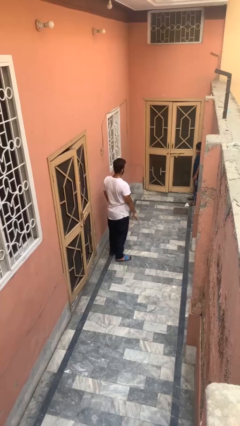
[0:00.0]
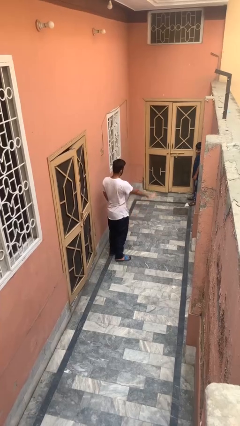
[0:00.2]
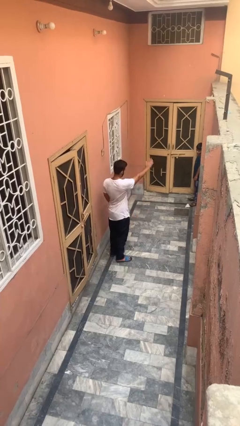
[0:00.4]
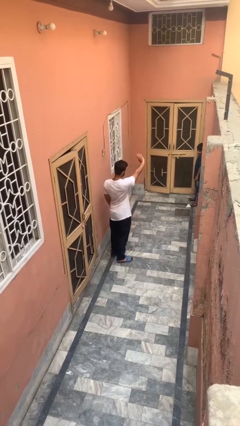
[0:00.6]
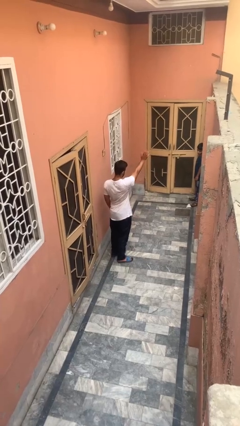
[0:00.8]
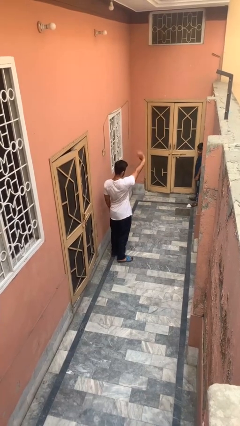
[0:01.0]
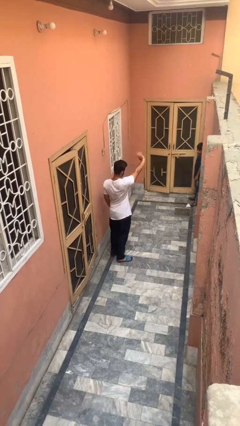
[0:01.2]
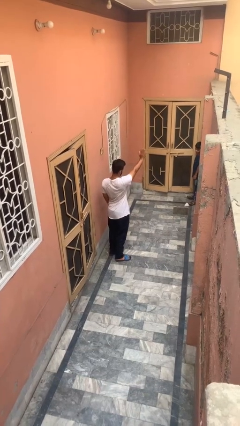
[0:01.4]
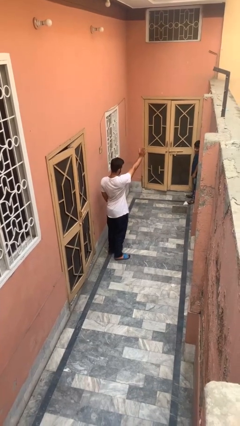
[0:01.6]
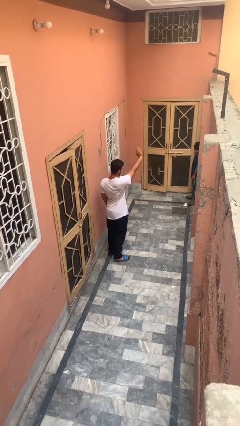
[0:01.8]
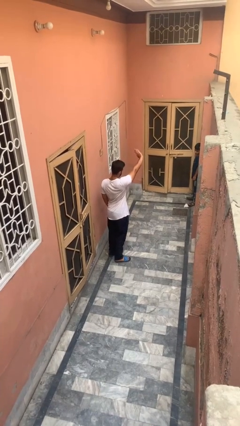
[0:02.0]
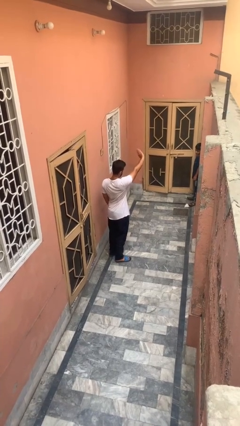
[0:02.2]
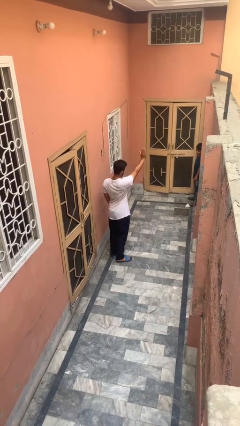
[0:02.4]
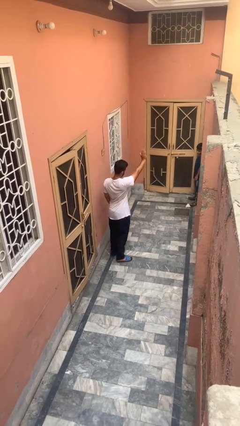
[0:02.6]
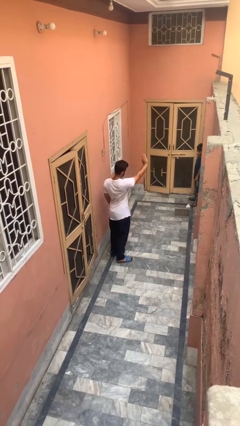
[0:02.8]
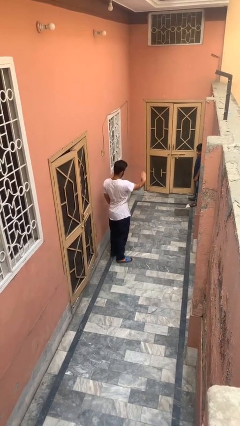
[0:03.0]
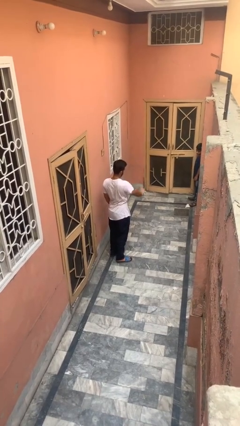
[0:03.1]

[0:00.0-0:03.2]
person waves at person

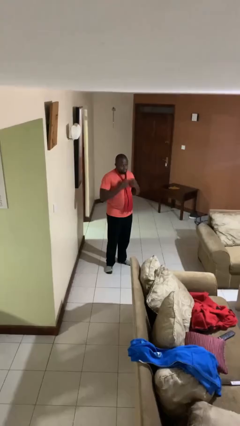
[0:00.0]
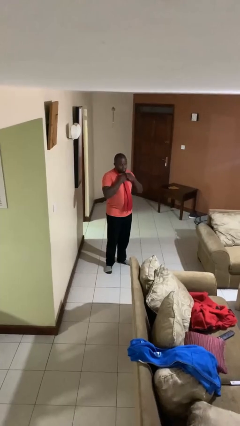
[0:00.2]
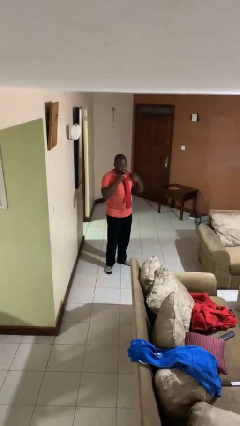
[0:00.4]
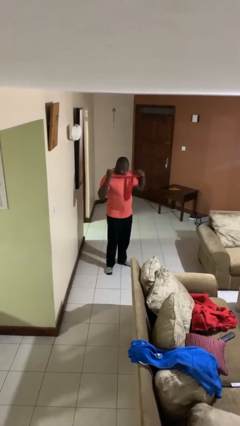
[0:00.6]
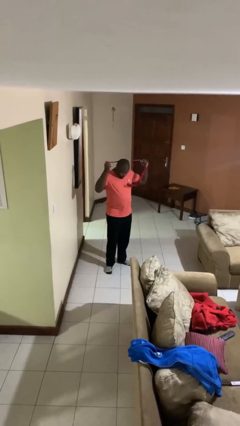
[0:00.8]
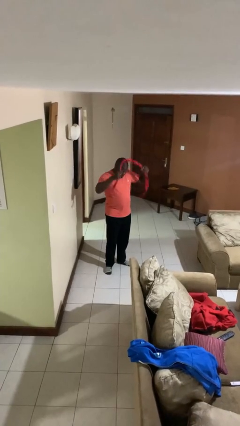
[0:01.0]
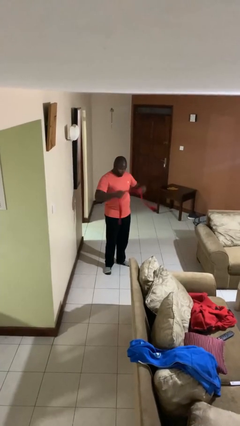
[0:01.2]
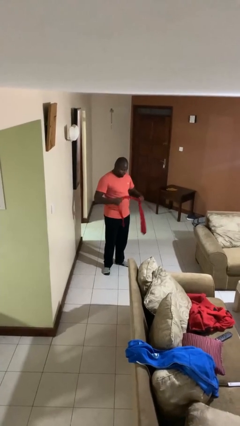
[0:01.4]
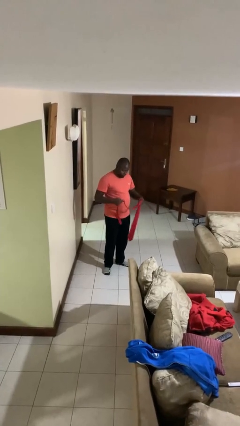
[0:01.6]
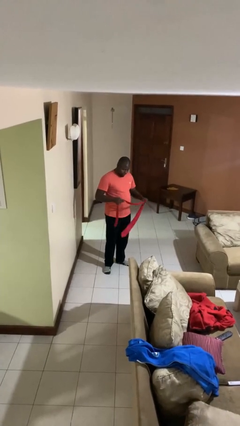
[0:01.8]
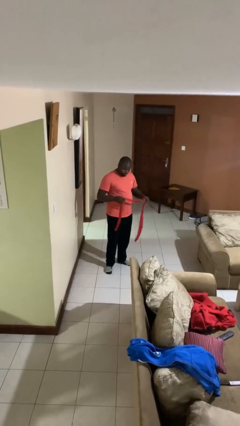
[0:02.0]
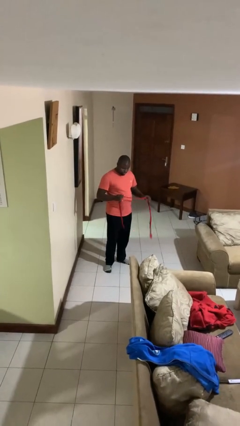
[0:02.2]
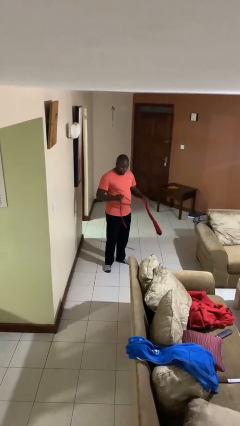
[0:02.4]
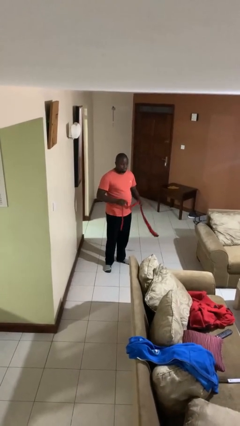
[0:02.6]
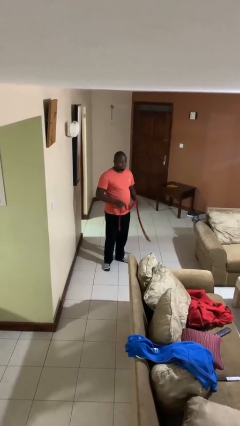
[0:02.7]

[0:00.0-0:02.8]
person takes off necktie

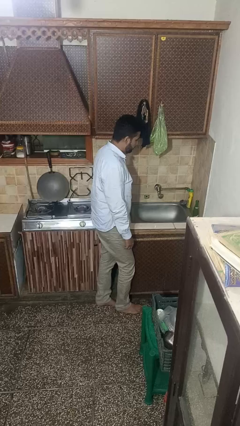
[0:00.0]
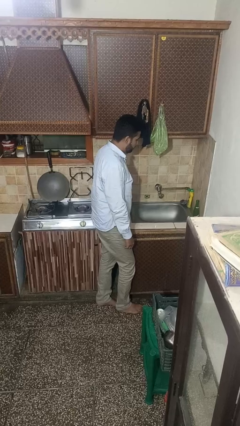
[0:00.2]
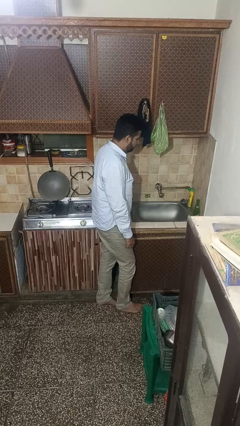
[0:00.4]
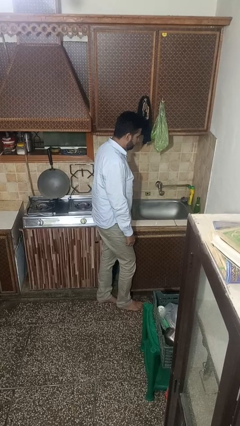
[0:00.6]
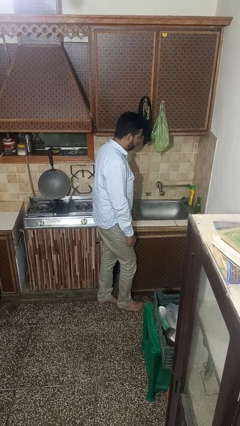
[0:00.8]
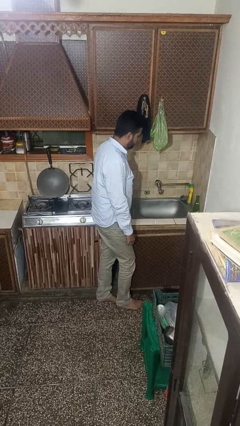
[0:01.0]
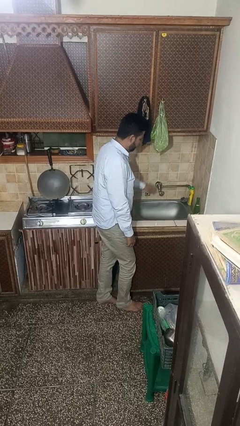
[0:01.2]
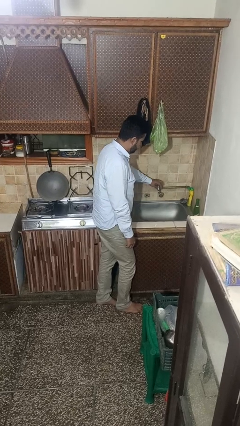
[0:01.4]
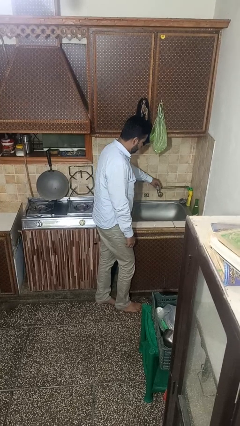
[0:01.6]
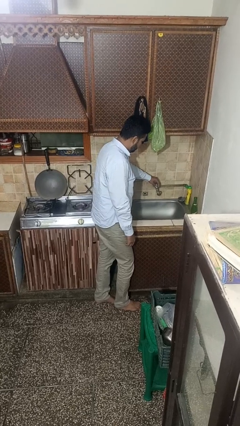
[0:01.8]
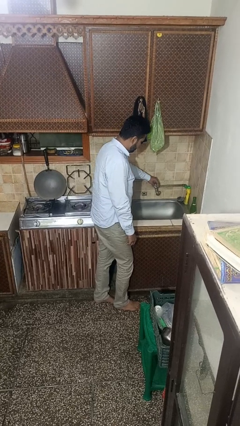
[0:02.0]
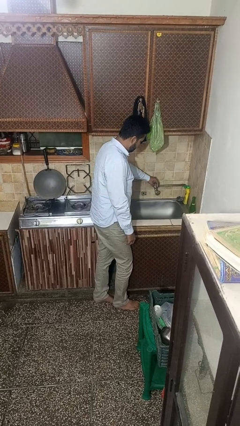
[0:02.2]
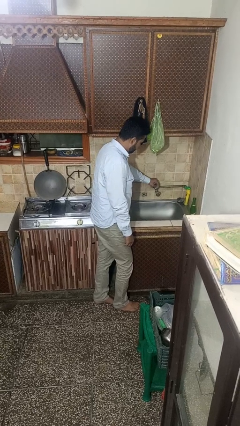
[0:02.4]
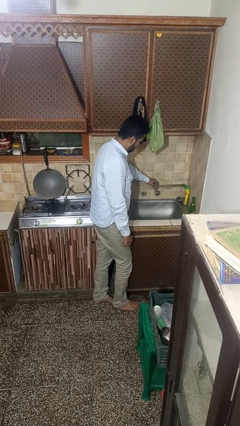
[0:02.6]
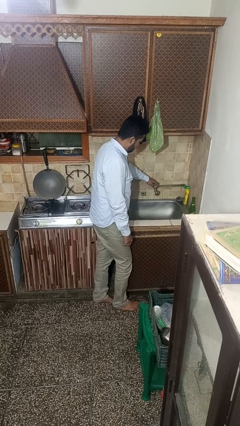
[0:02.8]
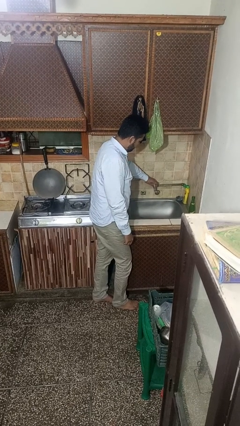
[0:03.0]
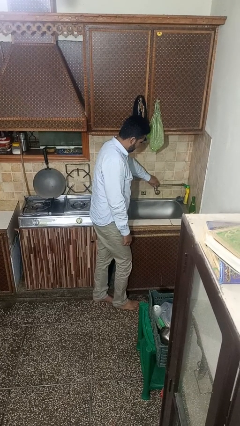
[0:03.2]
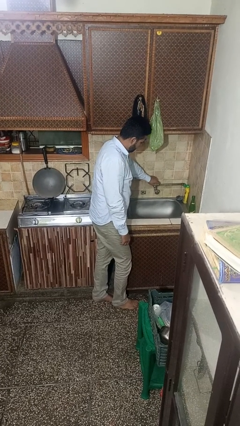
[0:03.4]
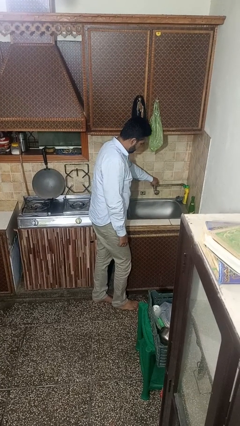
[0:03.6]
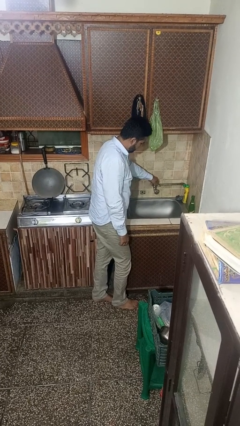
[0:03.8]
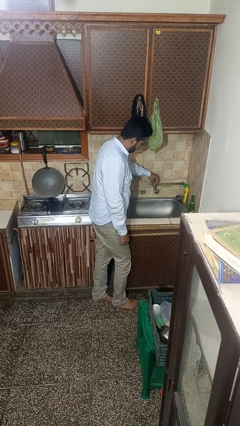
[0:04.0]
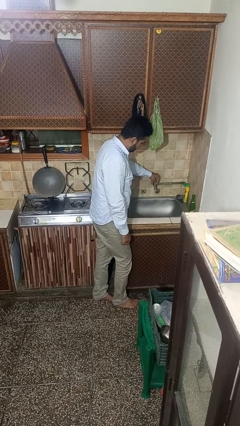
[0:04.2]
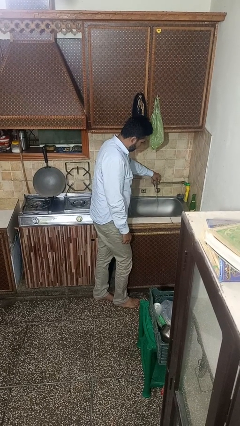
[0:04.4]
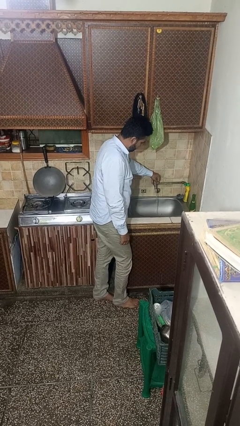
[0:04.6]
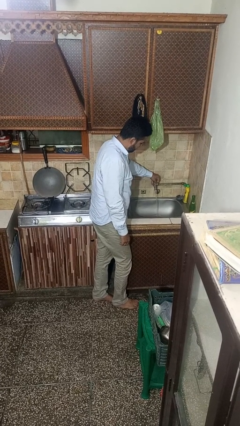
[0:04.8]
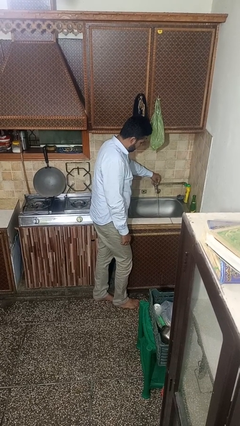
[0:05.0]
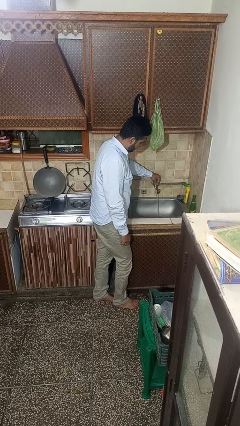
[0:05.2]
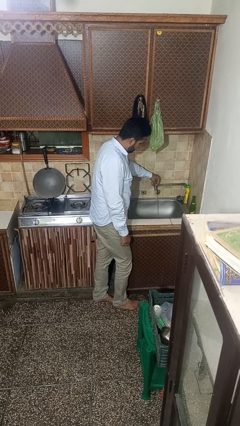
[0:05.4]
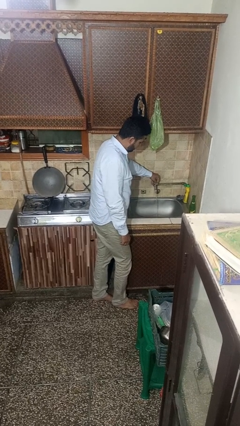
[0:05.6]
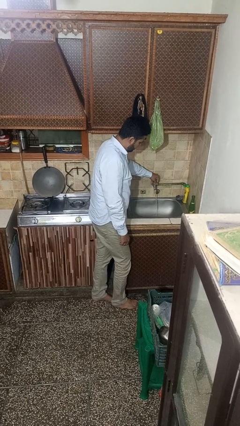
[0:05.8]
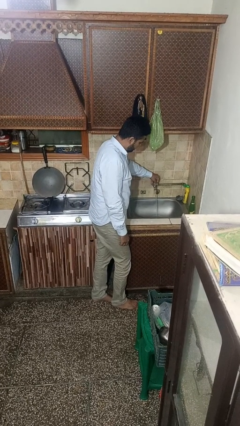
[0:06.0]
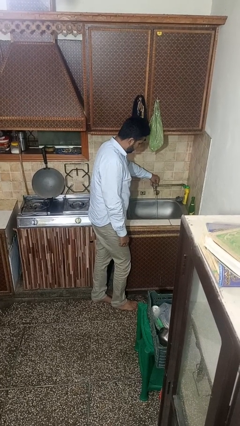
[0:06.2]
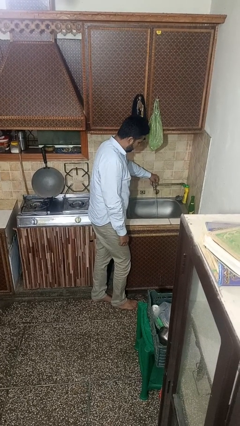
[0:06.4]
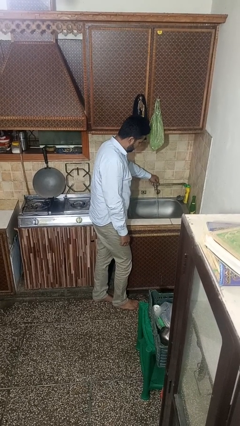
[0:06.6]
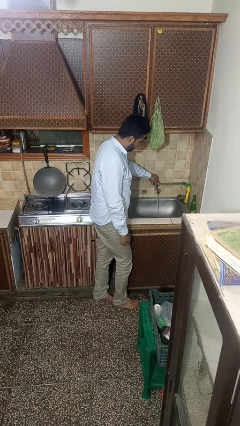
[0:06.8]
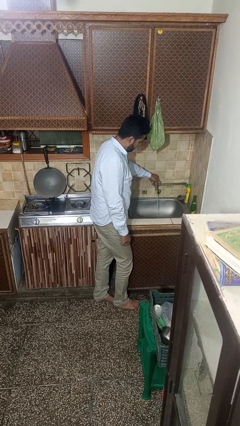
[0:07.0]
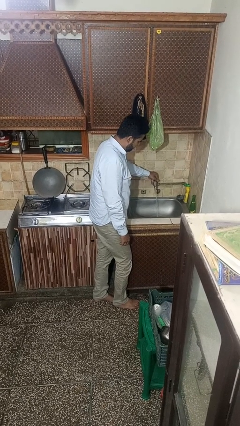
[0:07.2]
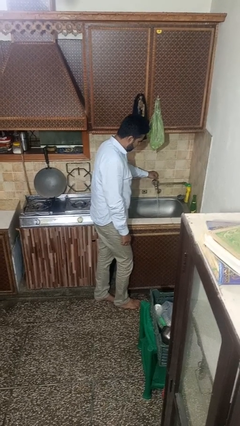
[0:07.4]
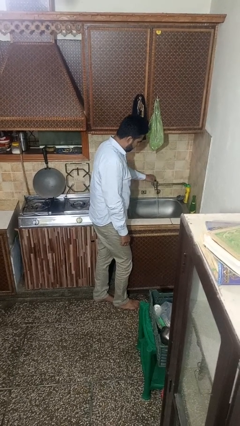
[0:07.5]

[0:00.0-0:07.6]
person turns on faucet

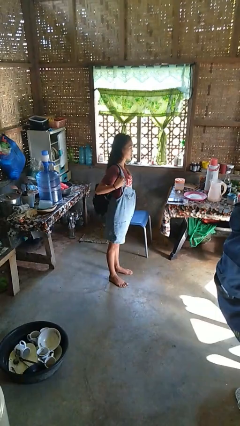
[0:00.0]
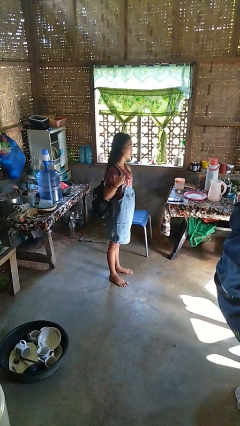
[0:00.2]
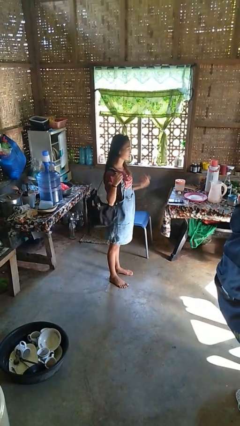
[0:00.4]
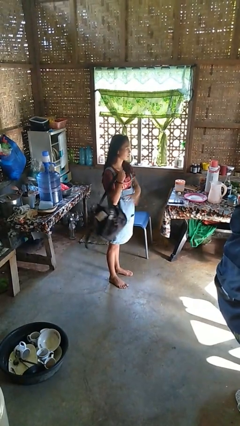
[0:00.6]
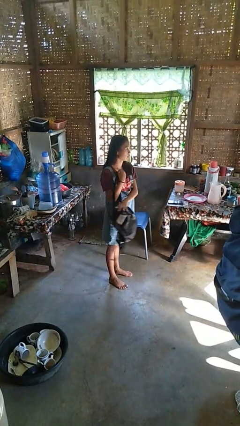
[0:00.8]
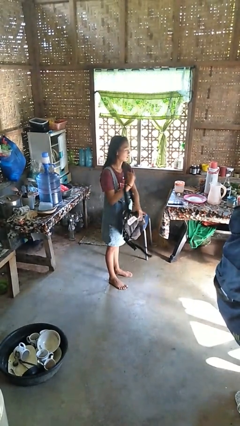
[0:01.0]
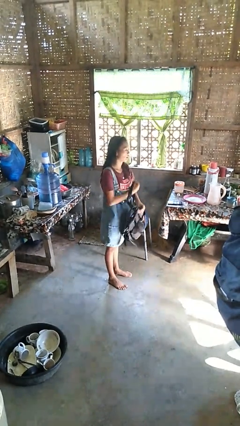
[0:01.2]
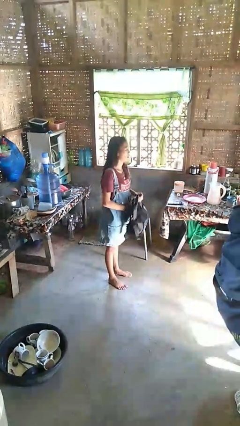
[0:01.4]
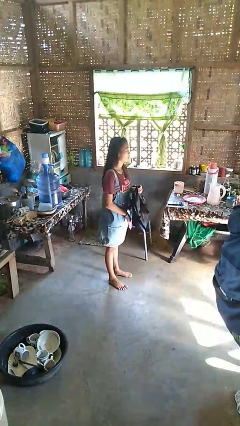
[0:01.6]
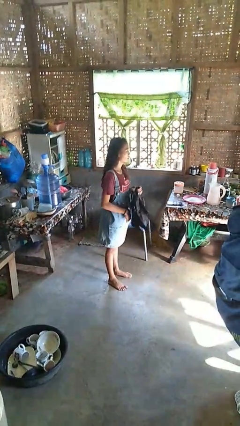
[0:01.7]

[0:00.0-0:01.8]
person takes off backpack

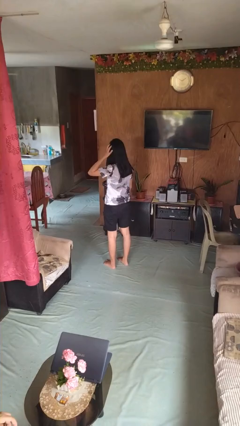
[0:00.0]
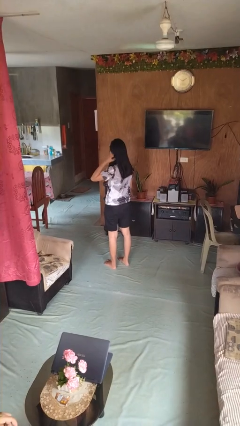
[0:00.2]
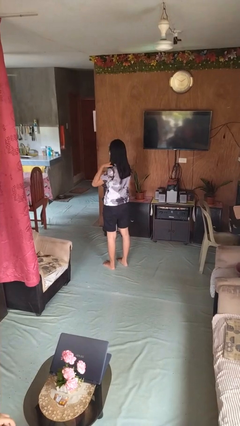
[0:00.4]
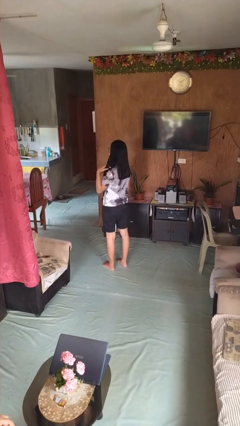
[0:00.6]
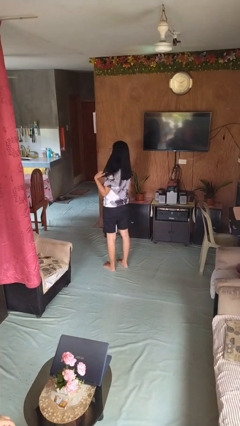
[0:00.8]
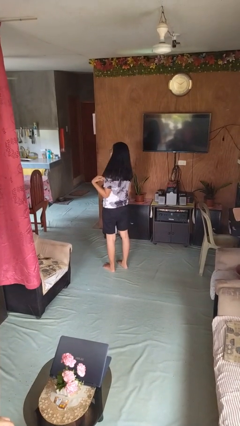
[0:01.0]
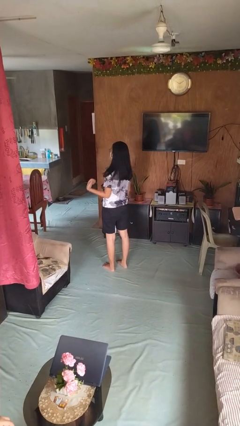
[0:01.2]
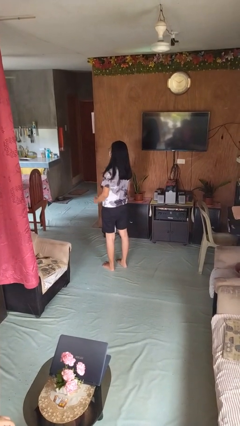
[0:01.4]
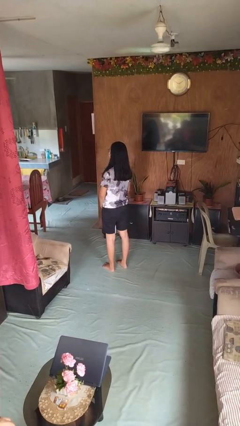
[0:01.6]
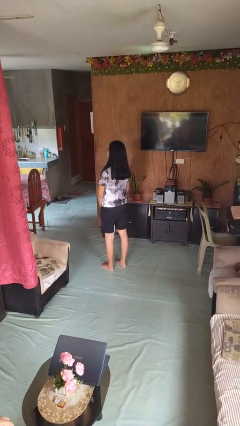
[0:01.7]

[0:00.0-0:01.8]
person strokes hair
